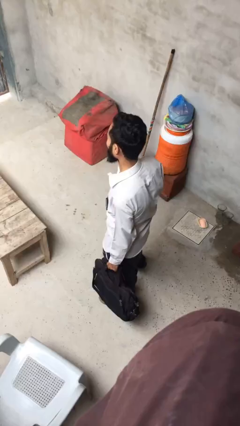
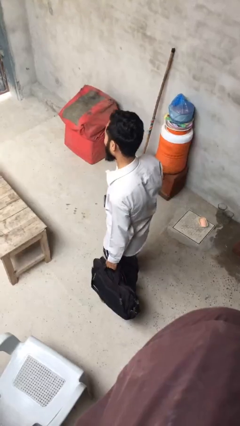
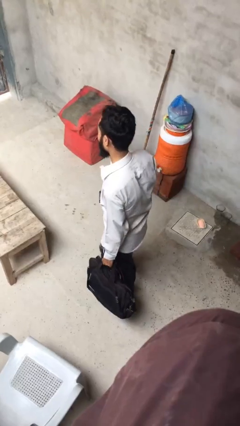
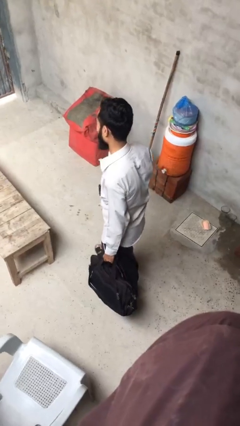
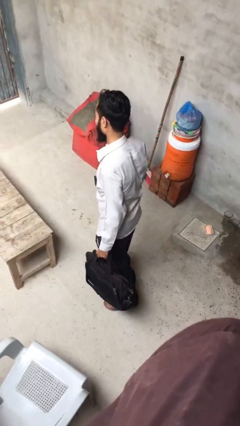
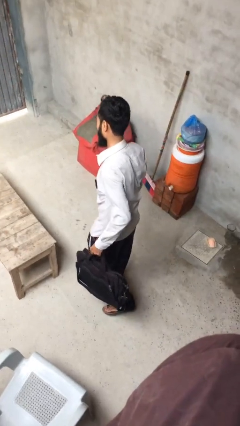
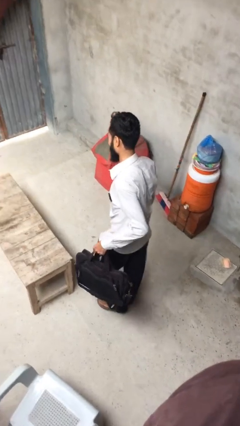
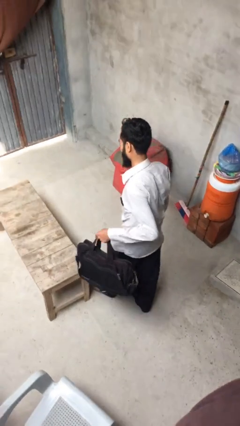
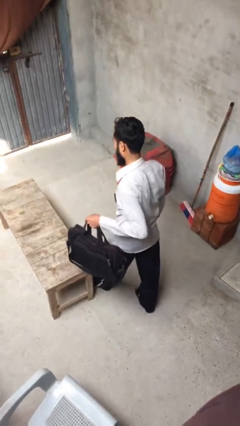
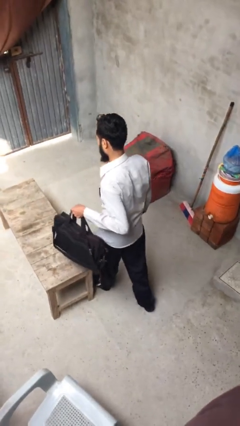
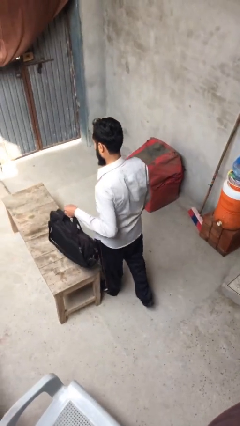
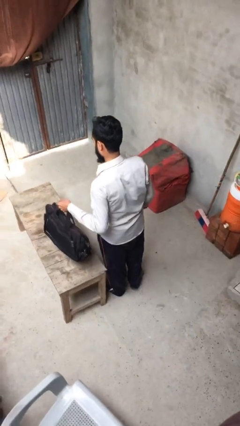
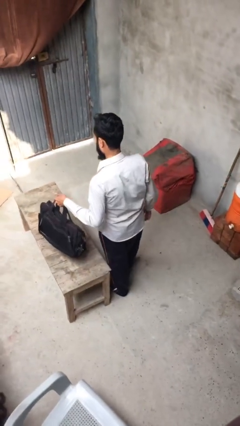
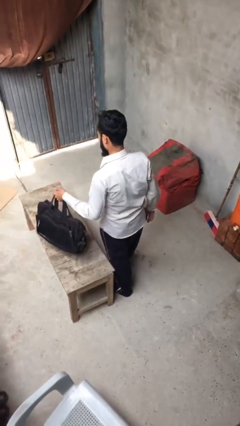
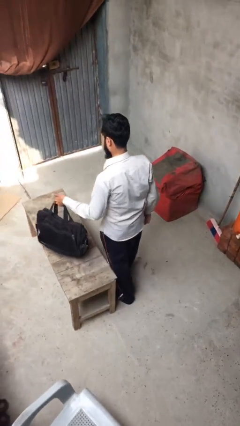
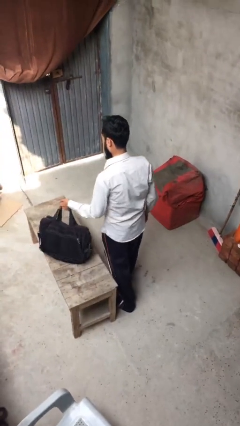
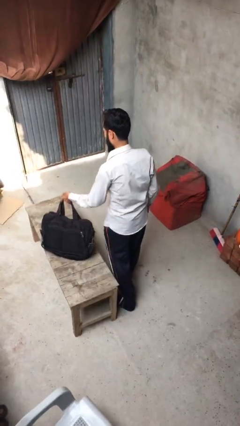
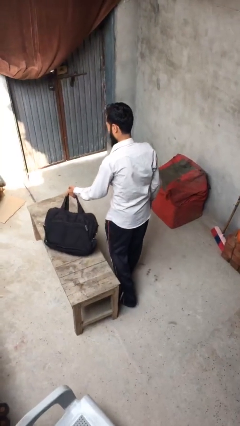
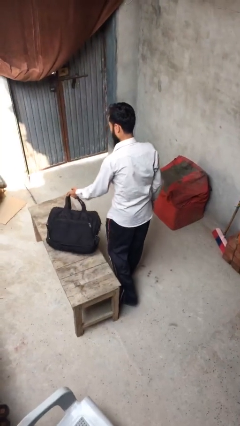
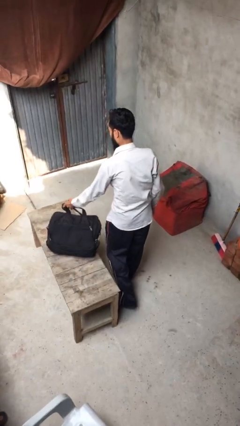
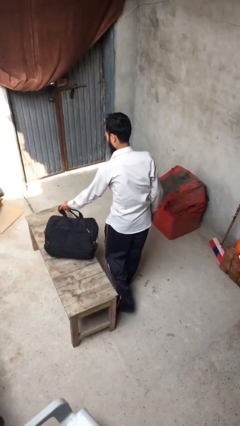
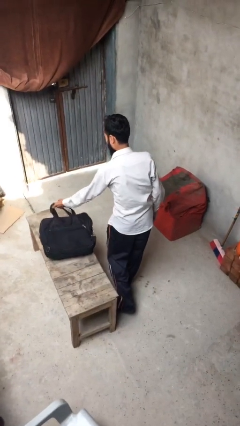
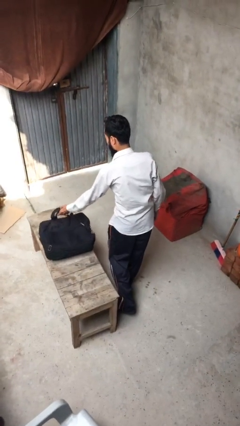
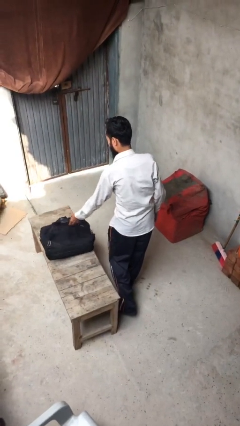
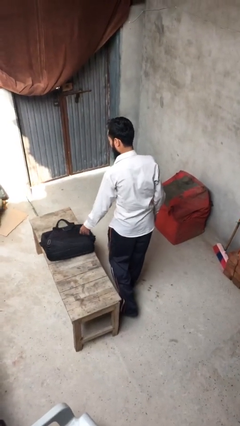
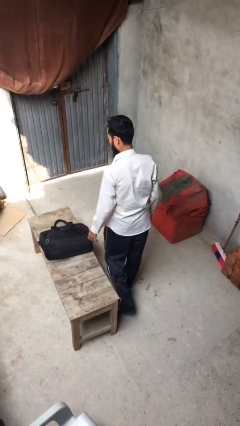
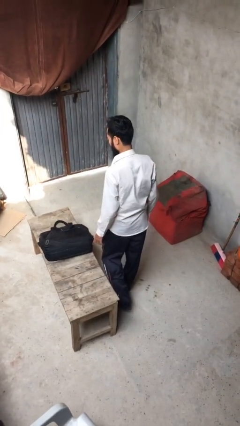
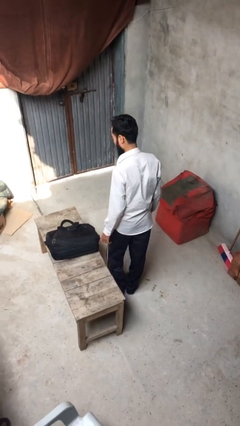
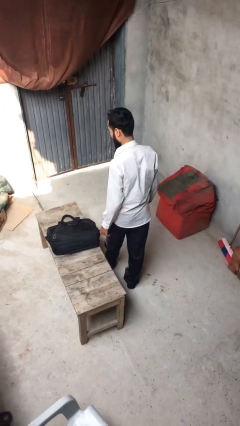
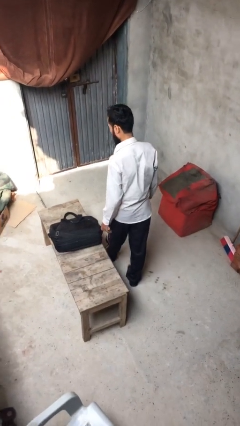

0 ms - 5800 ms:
person puts down object on table

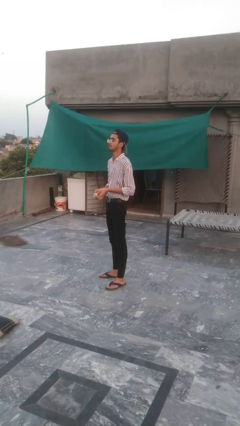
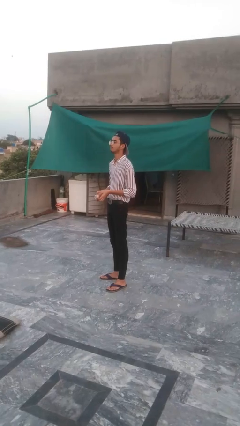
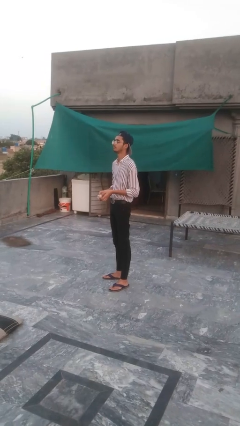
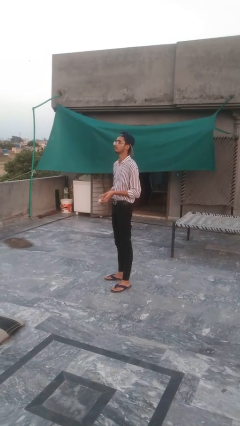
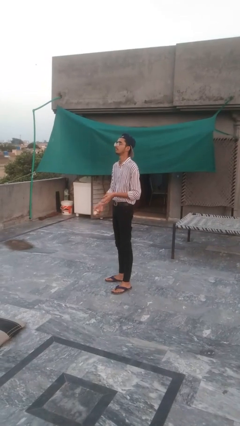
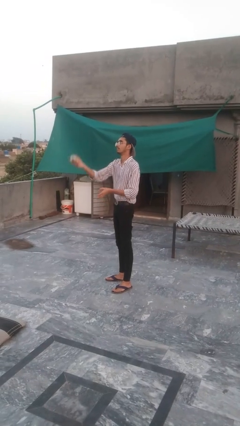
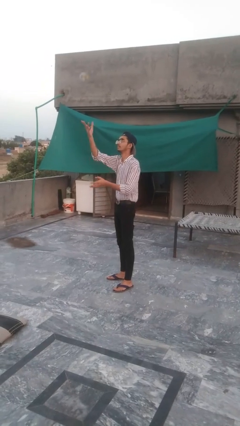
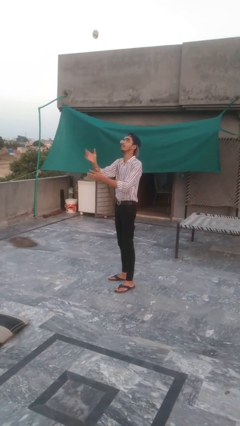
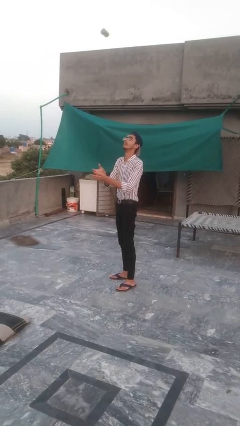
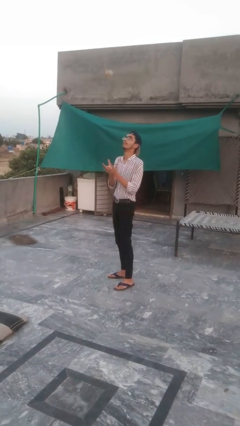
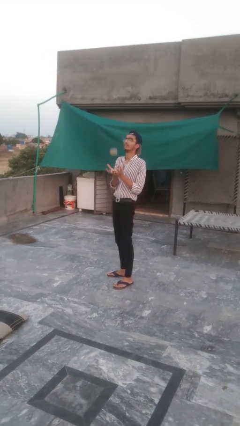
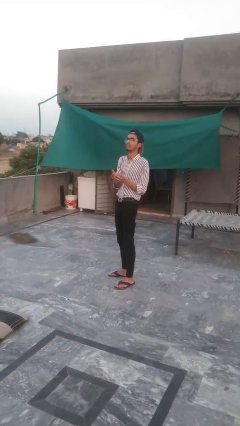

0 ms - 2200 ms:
person drops object

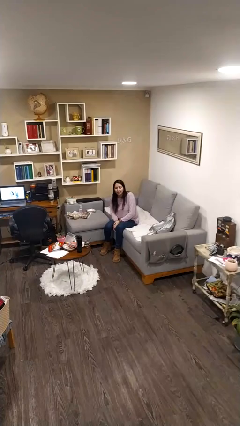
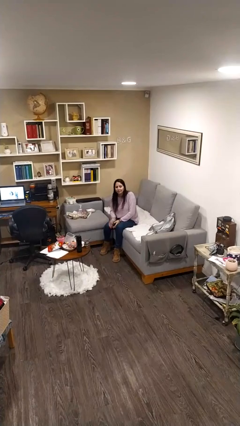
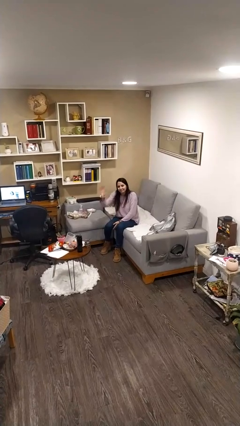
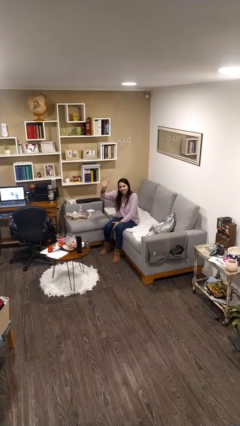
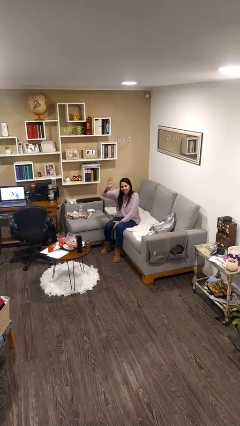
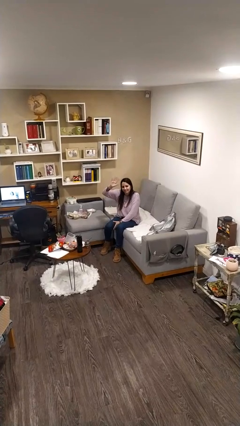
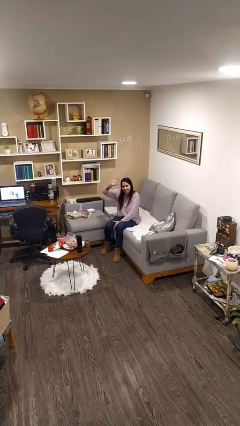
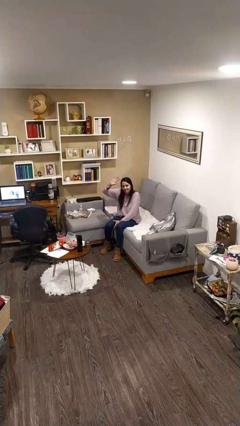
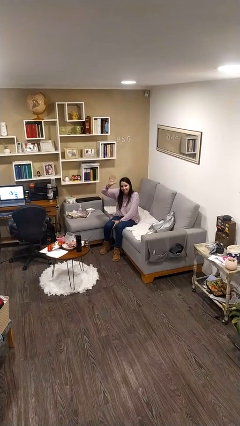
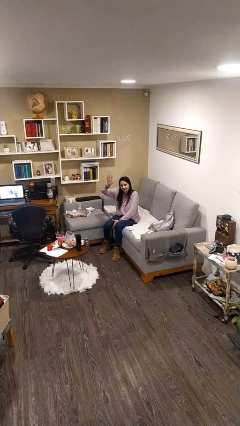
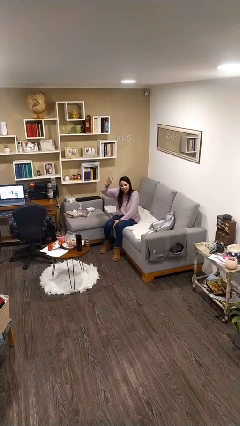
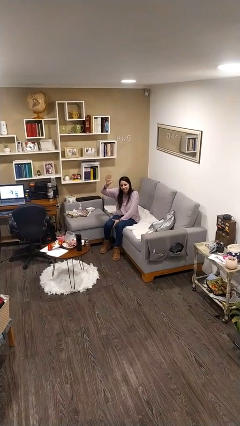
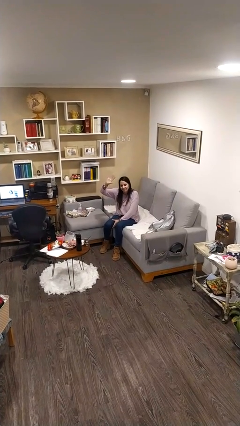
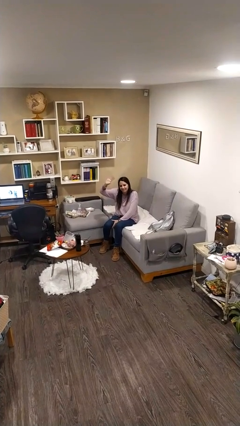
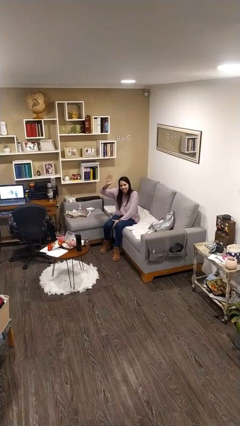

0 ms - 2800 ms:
person waves at person

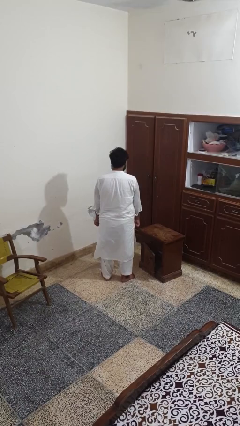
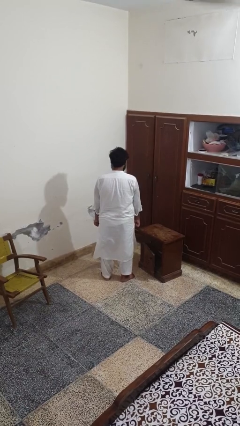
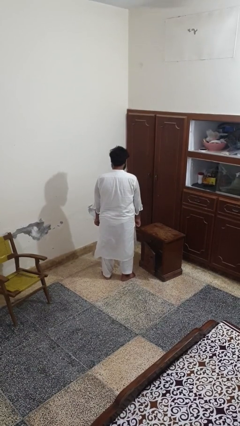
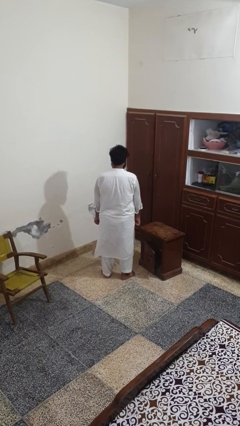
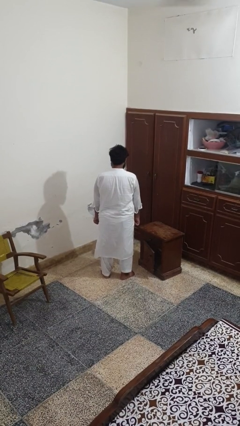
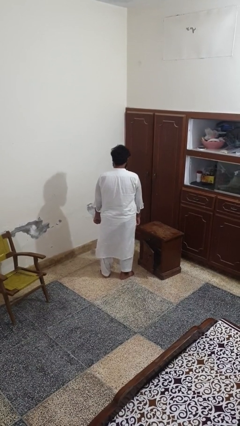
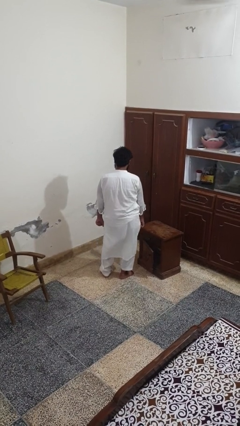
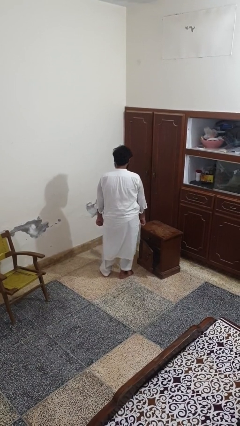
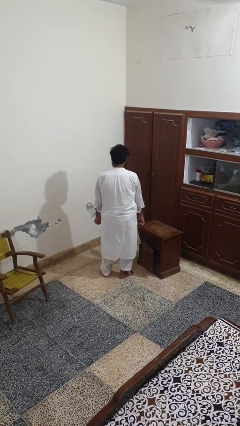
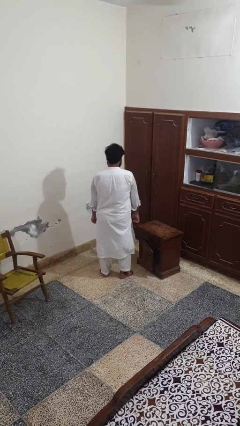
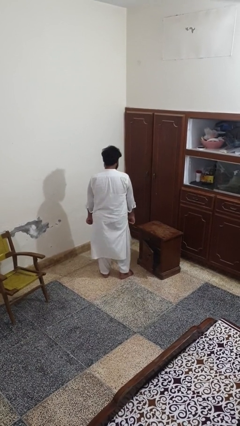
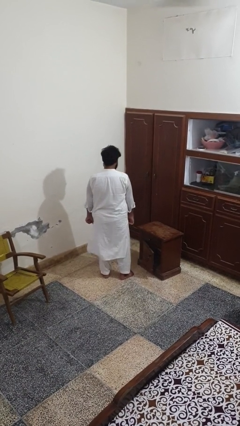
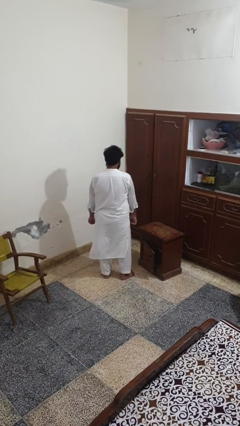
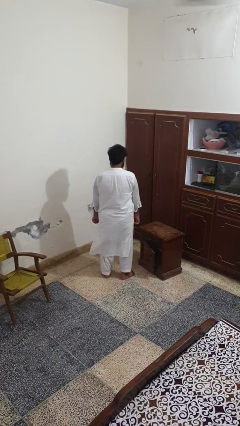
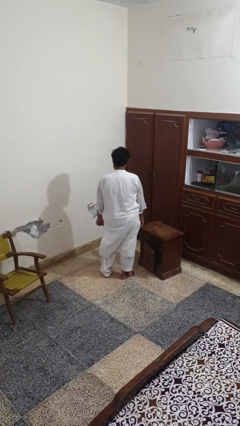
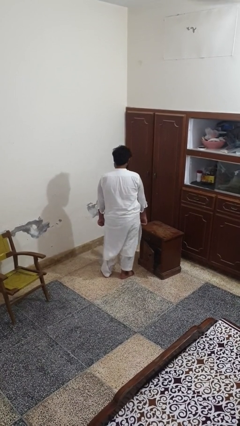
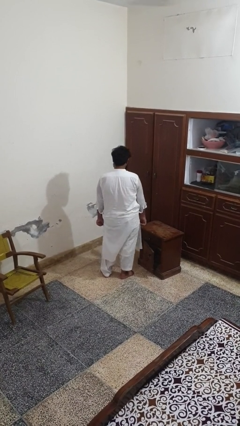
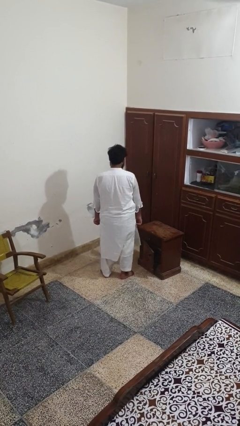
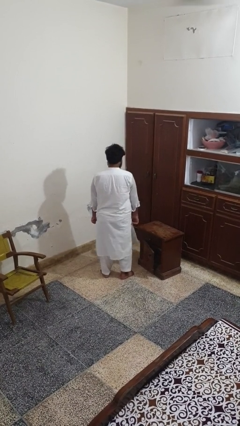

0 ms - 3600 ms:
person wiggles hips

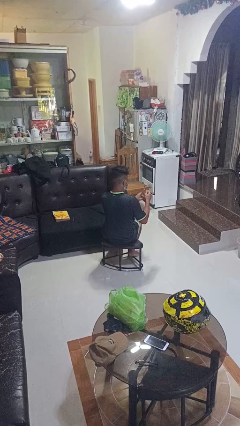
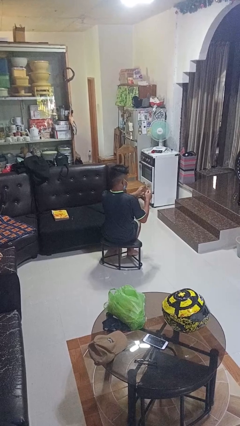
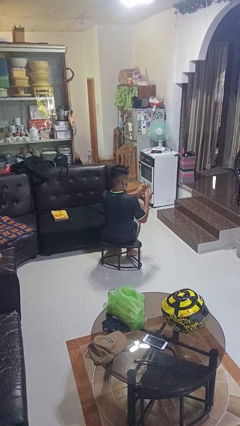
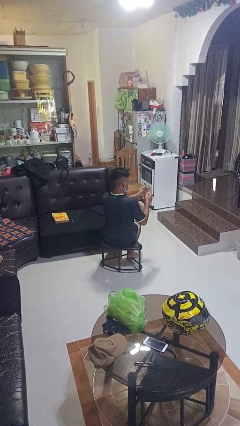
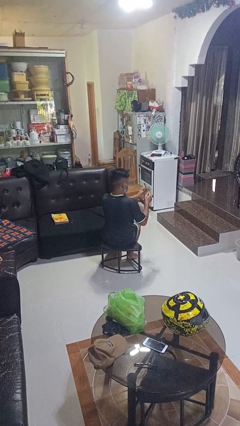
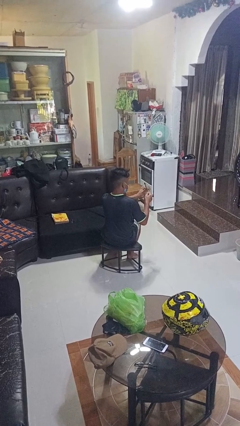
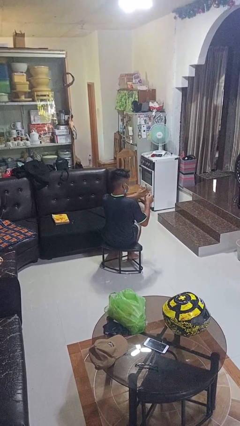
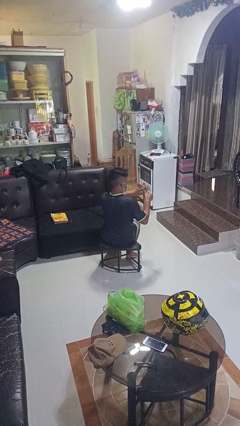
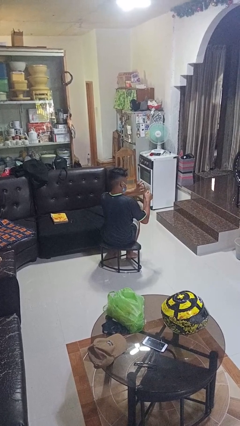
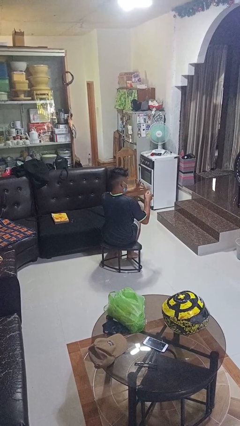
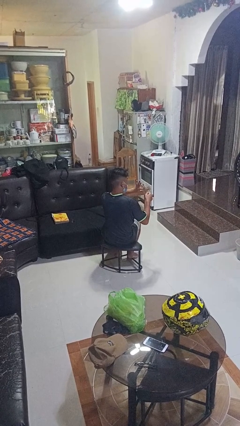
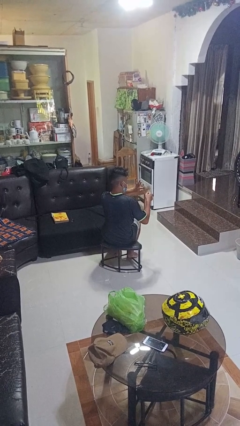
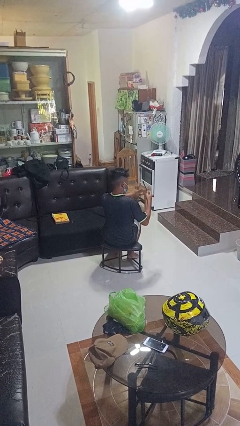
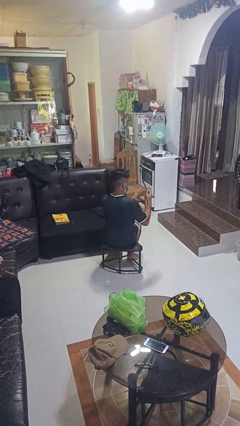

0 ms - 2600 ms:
person files fingernails

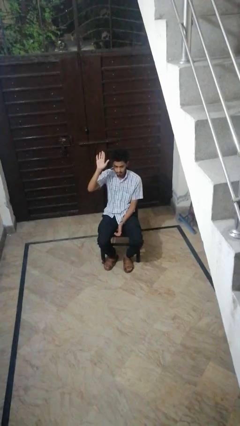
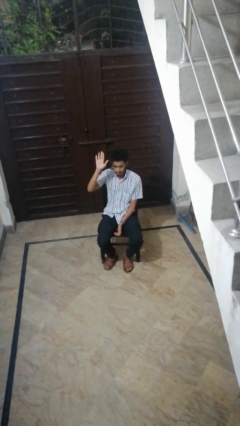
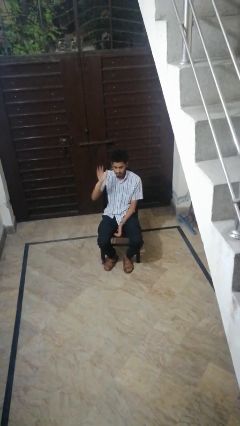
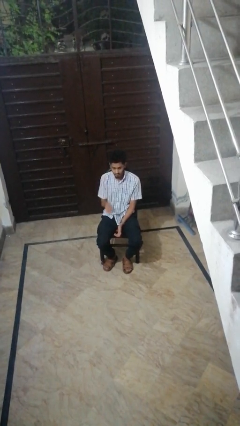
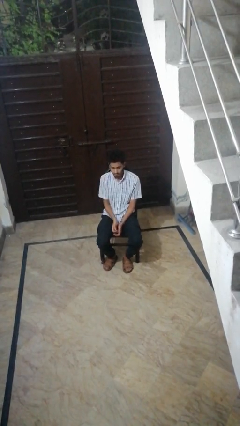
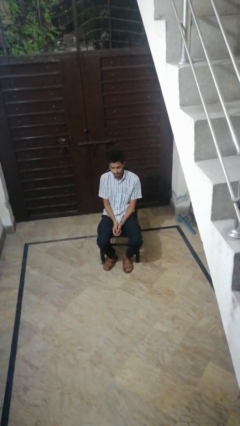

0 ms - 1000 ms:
person gestures lower hand
